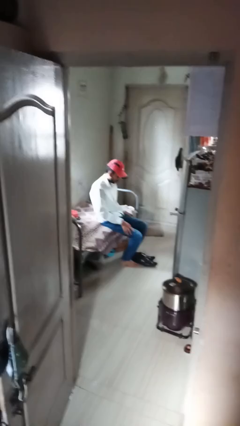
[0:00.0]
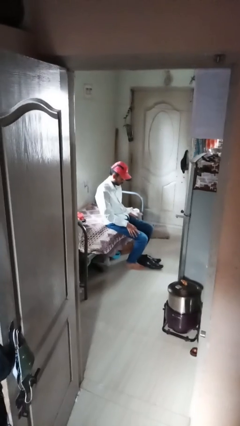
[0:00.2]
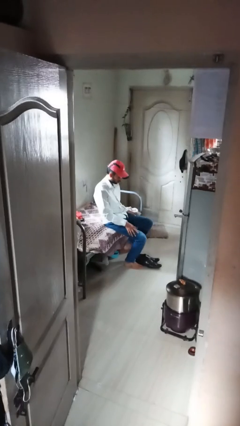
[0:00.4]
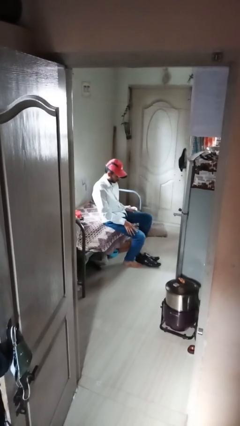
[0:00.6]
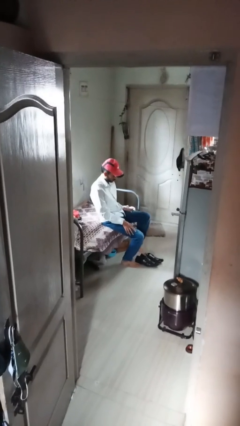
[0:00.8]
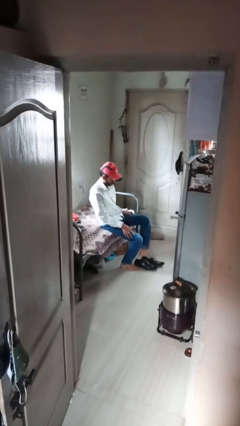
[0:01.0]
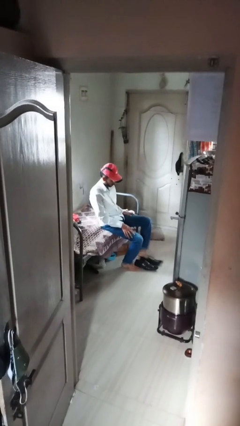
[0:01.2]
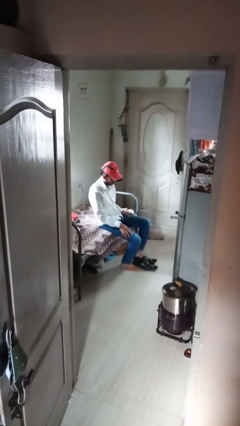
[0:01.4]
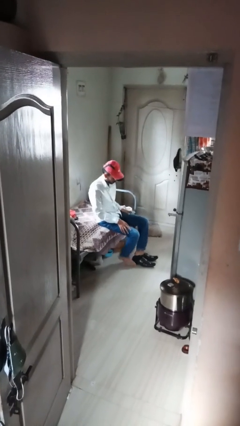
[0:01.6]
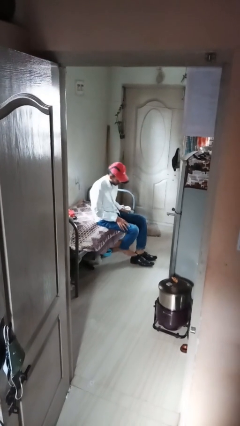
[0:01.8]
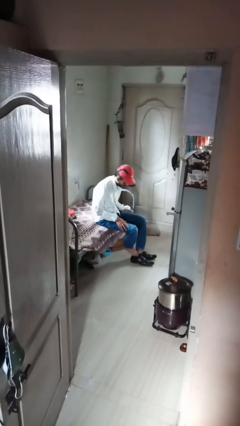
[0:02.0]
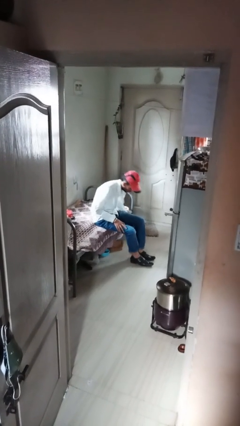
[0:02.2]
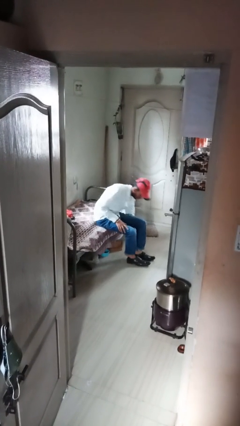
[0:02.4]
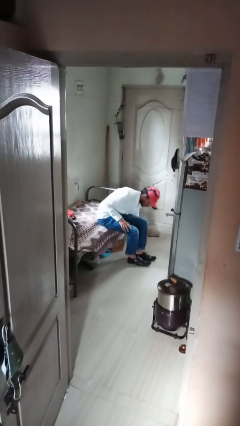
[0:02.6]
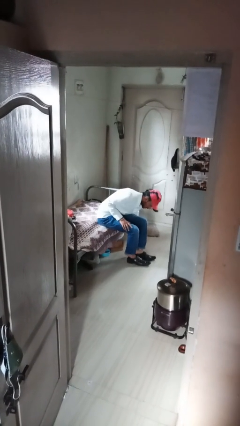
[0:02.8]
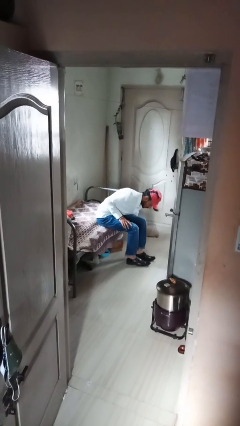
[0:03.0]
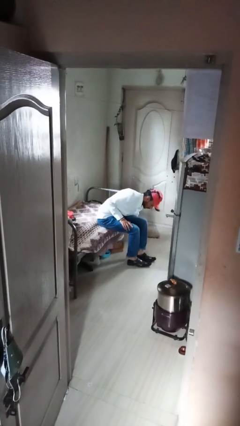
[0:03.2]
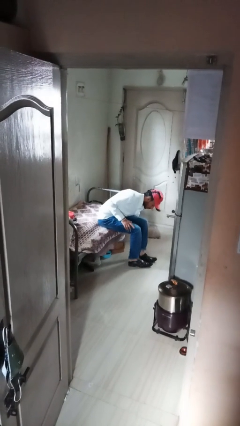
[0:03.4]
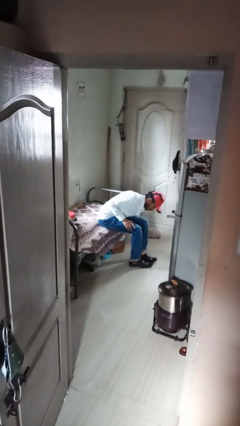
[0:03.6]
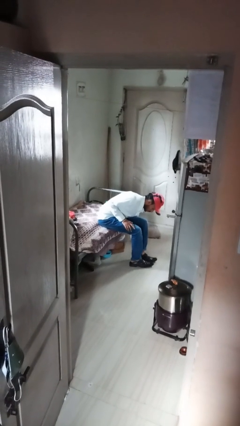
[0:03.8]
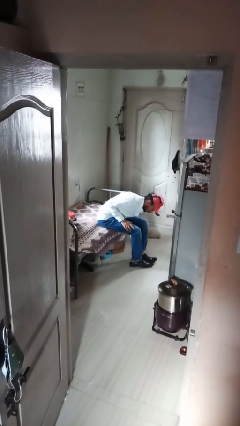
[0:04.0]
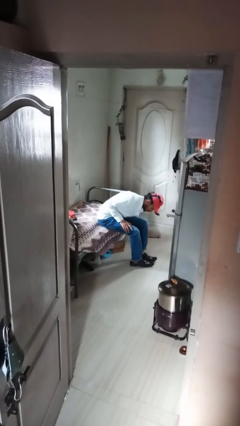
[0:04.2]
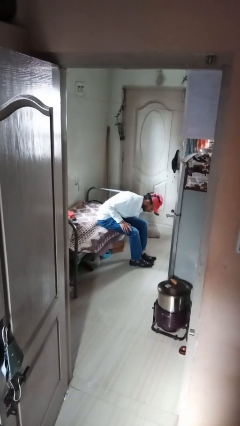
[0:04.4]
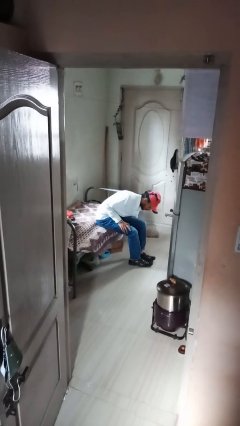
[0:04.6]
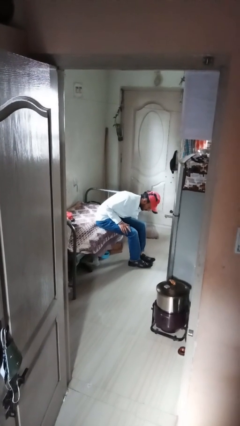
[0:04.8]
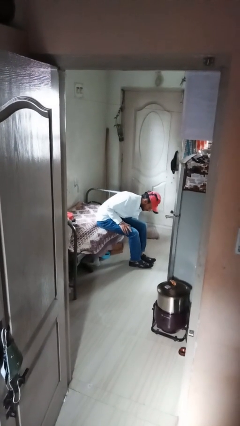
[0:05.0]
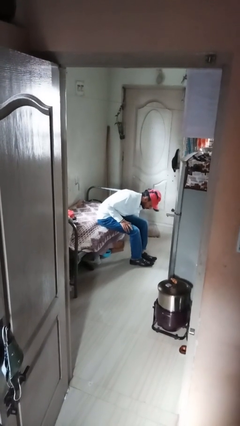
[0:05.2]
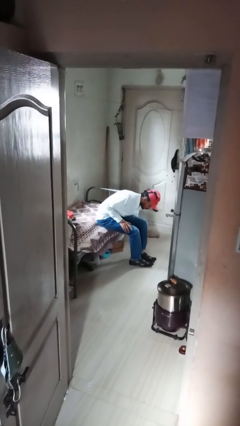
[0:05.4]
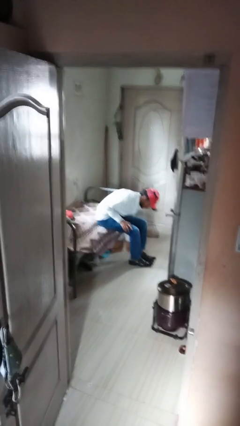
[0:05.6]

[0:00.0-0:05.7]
person puts on shoes

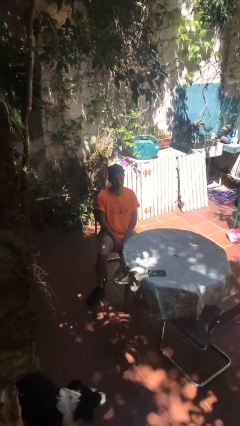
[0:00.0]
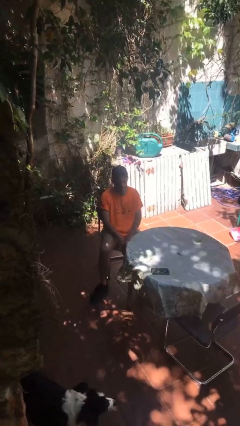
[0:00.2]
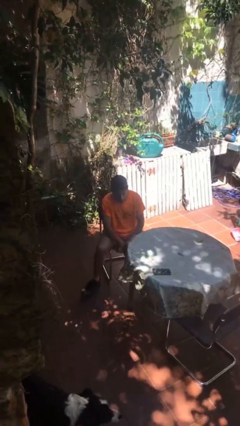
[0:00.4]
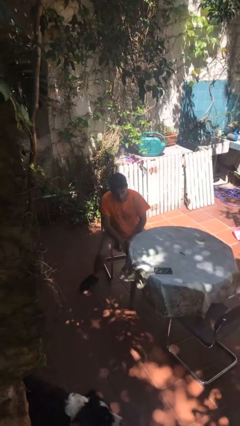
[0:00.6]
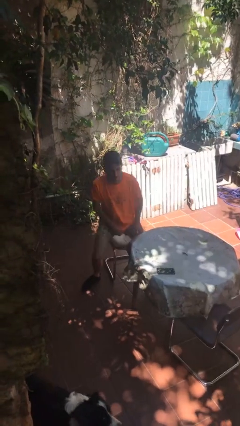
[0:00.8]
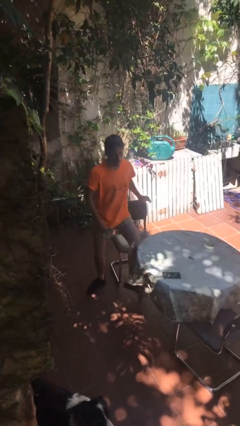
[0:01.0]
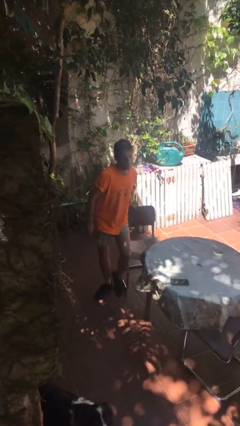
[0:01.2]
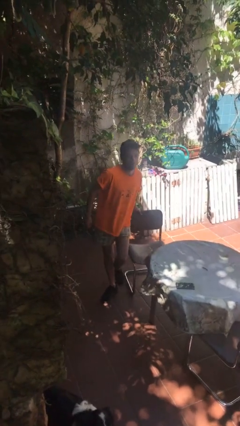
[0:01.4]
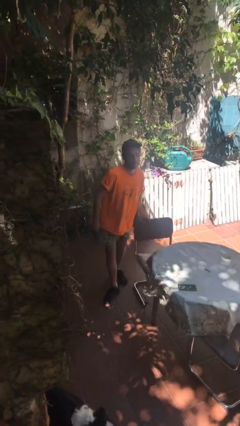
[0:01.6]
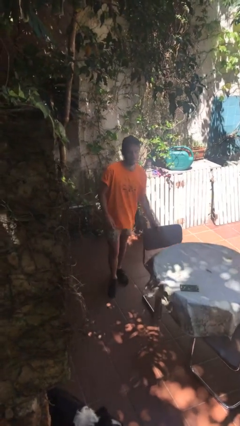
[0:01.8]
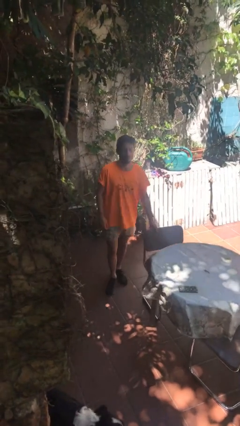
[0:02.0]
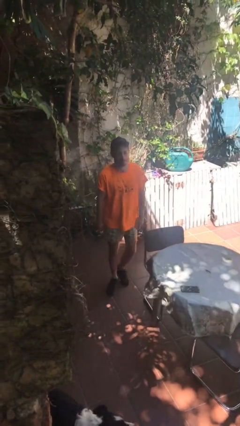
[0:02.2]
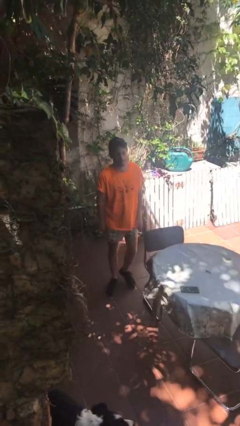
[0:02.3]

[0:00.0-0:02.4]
person stands up

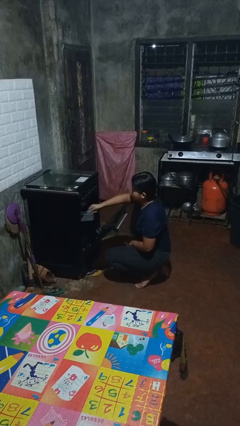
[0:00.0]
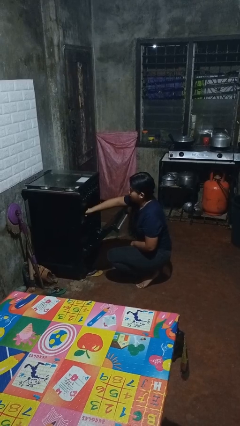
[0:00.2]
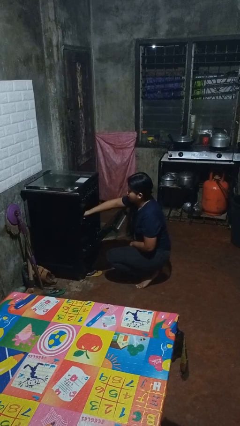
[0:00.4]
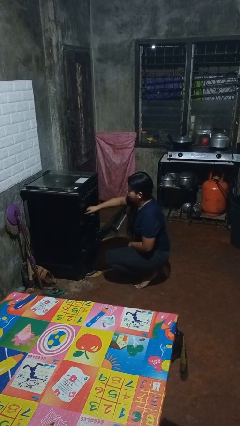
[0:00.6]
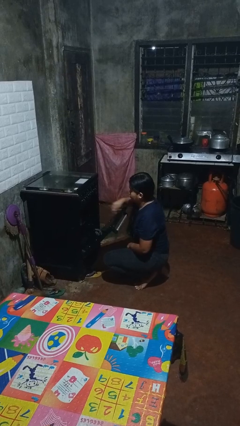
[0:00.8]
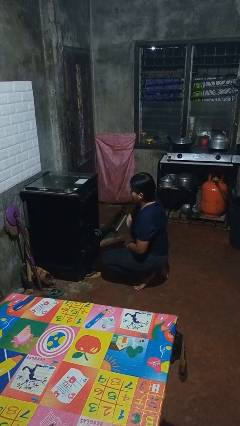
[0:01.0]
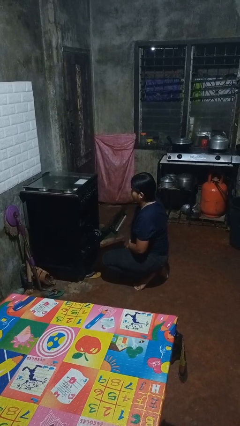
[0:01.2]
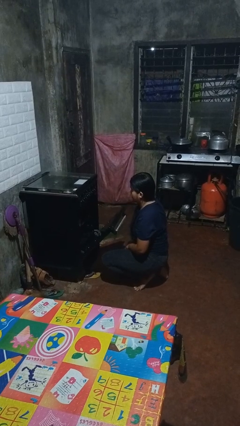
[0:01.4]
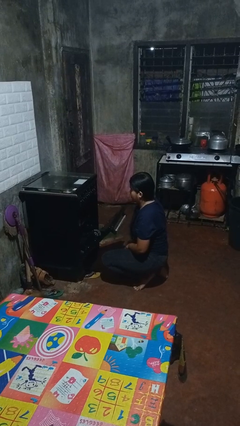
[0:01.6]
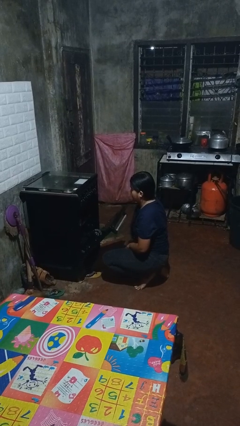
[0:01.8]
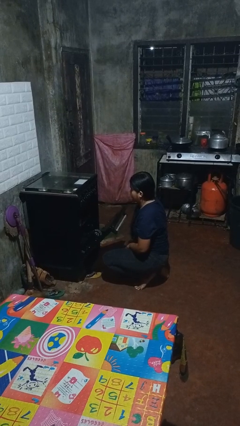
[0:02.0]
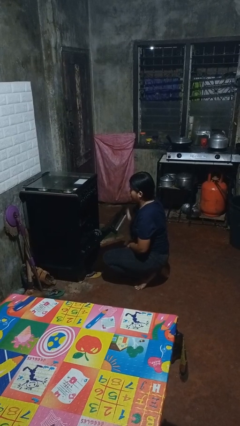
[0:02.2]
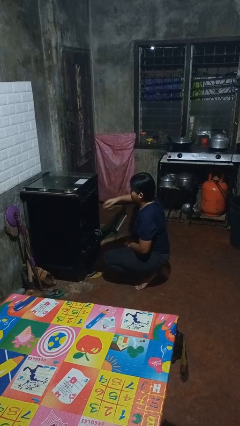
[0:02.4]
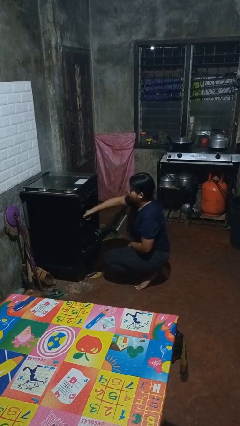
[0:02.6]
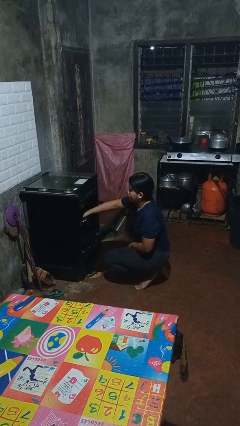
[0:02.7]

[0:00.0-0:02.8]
person puts object into oven

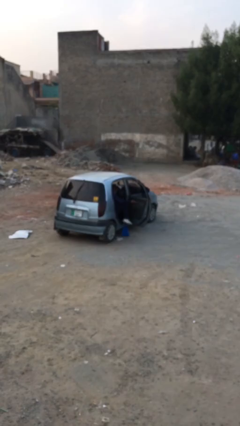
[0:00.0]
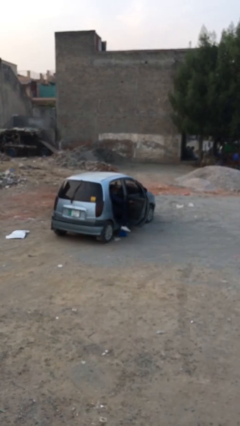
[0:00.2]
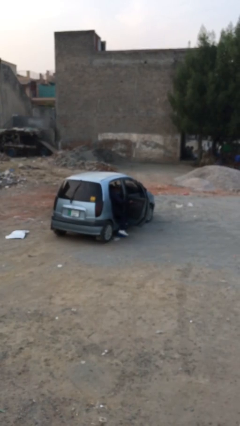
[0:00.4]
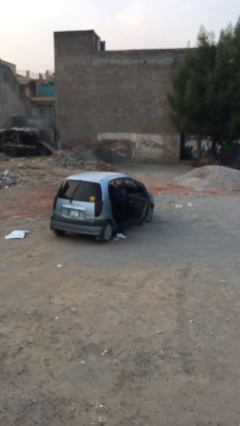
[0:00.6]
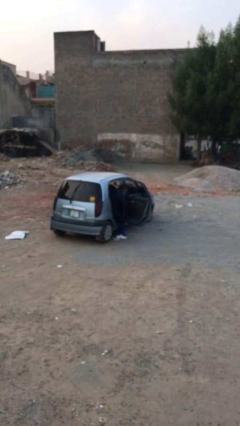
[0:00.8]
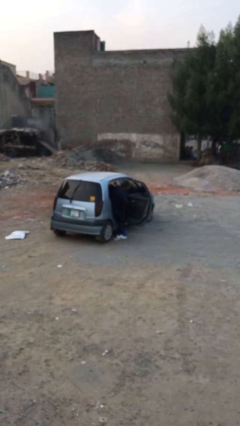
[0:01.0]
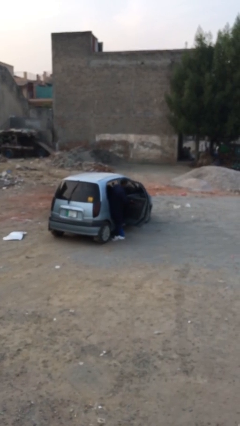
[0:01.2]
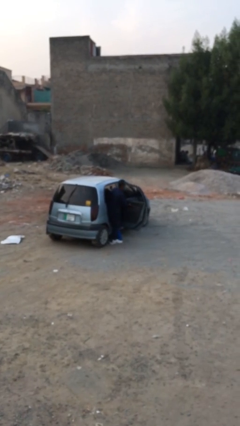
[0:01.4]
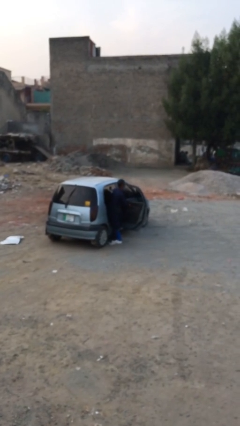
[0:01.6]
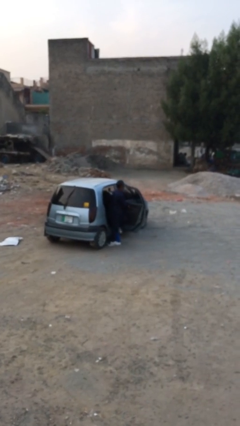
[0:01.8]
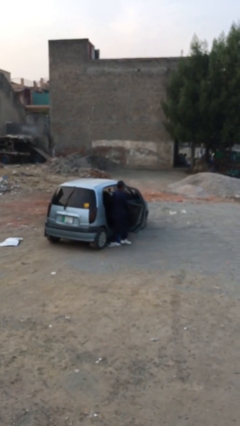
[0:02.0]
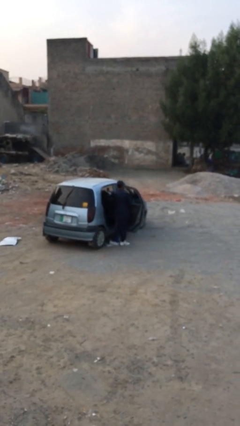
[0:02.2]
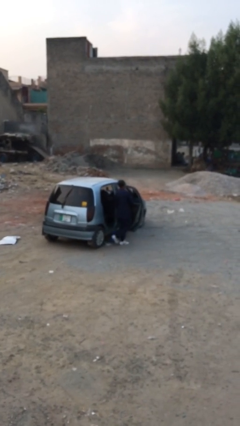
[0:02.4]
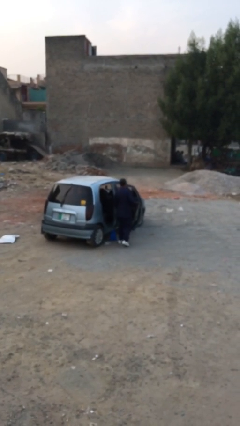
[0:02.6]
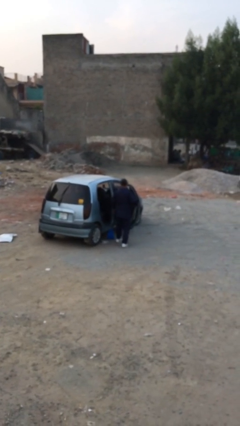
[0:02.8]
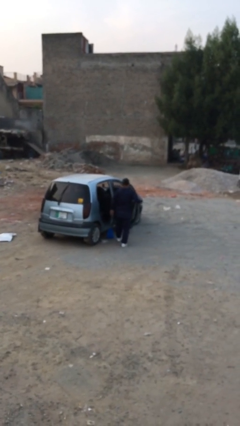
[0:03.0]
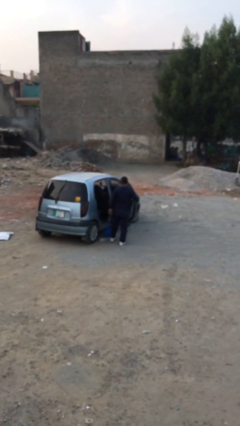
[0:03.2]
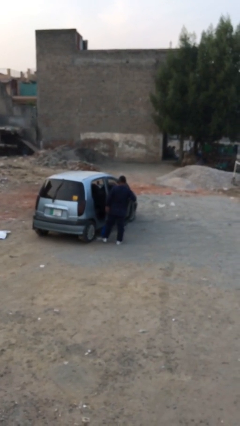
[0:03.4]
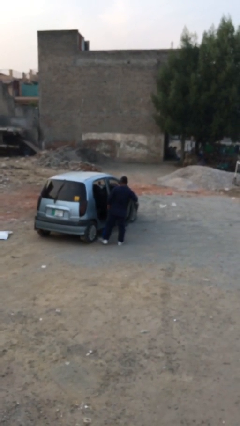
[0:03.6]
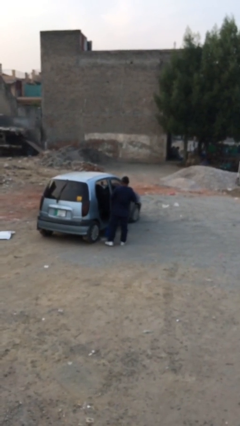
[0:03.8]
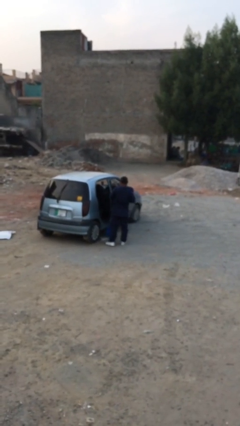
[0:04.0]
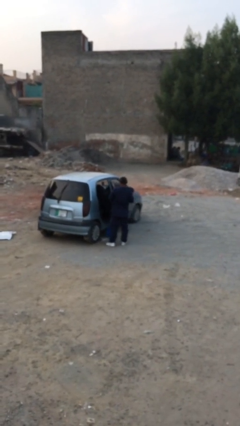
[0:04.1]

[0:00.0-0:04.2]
person exits car

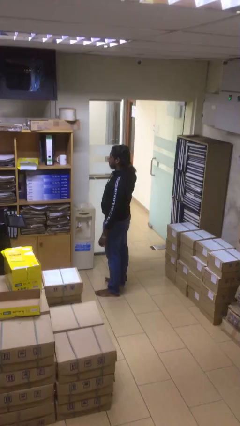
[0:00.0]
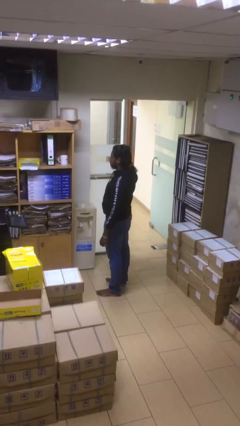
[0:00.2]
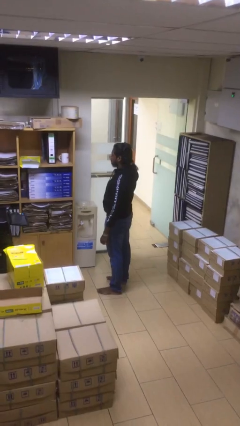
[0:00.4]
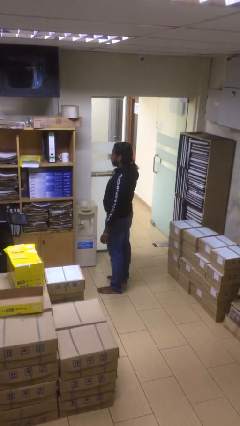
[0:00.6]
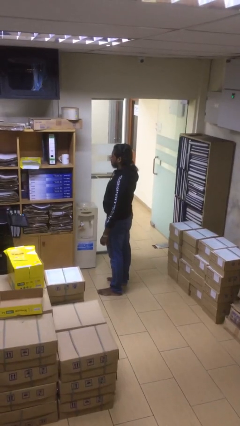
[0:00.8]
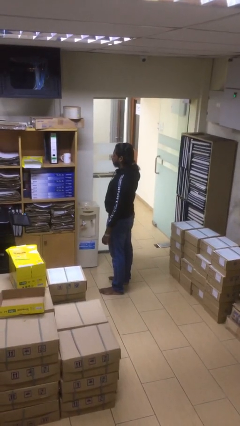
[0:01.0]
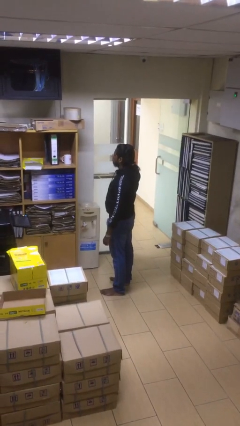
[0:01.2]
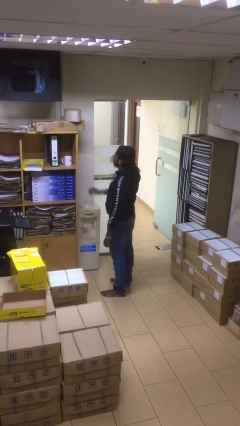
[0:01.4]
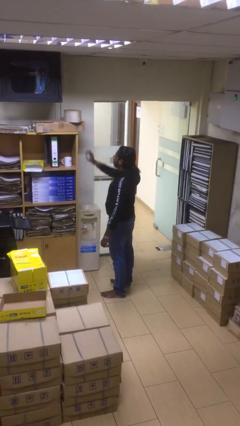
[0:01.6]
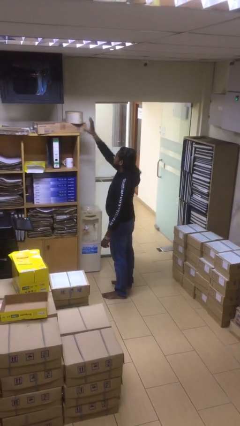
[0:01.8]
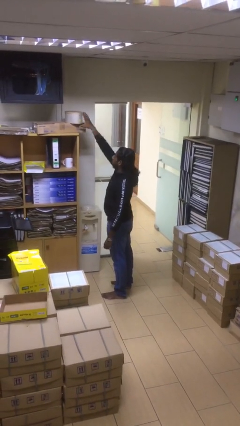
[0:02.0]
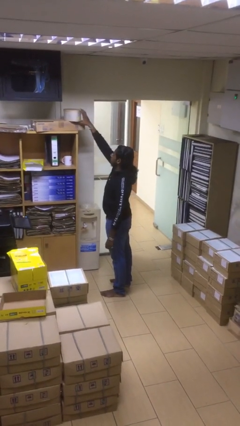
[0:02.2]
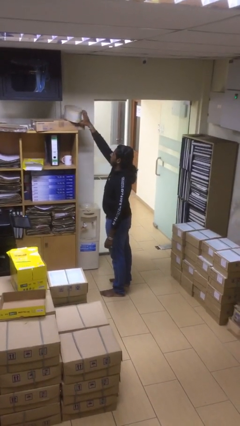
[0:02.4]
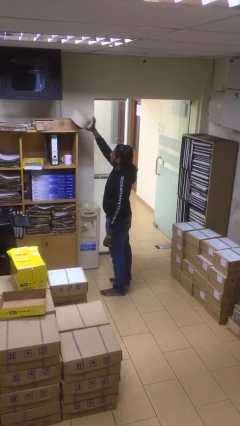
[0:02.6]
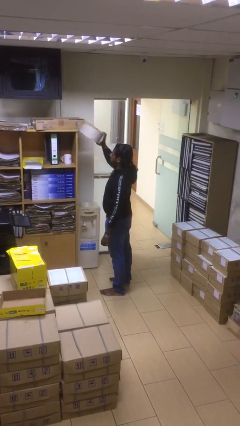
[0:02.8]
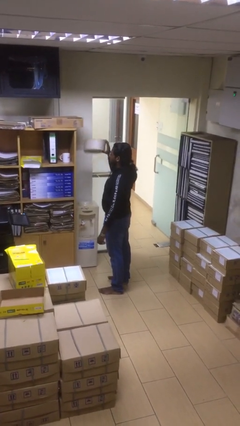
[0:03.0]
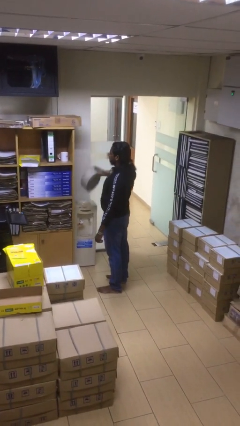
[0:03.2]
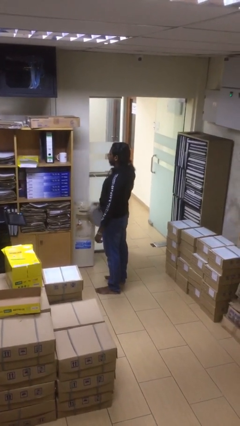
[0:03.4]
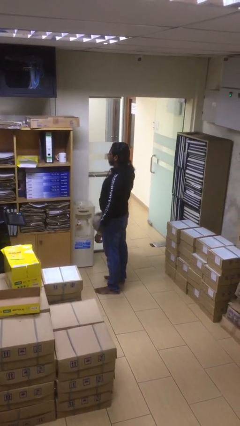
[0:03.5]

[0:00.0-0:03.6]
person picks up object from shelf
